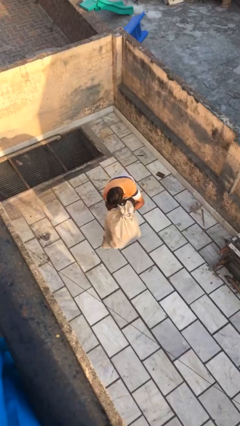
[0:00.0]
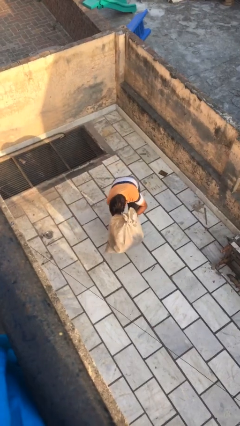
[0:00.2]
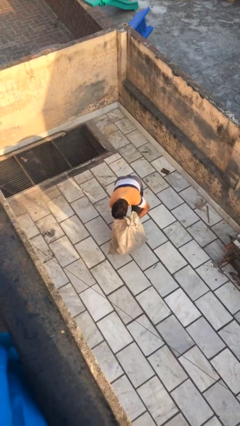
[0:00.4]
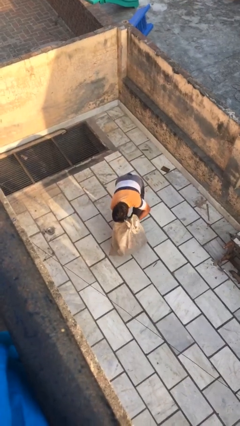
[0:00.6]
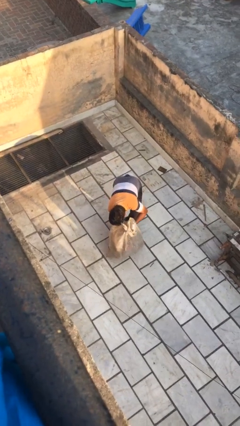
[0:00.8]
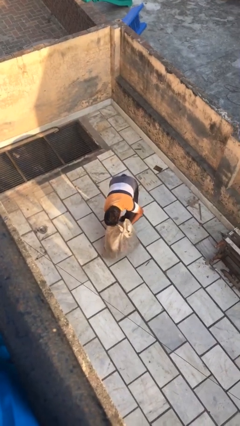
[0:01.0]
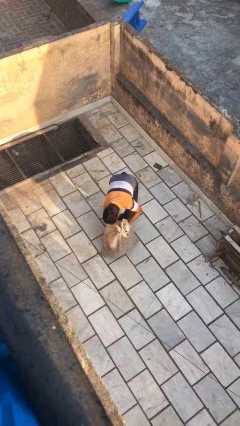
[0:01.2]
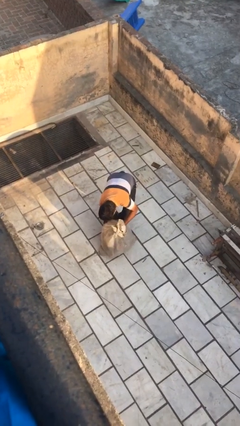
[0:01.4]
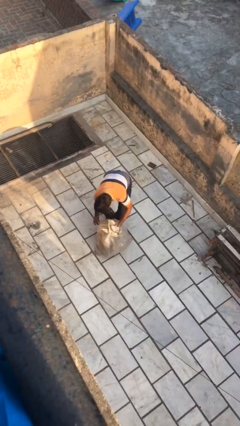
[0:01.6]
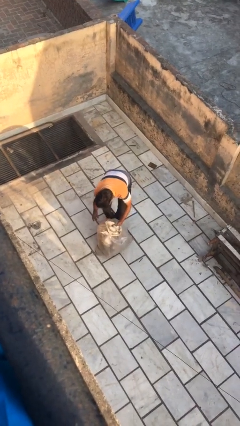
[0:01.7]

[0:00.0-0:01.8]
person puts down object on floor

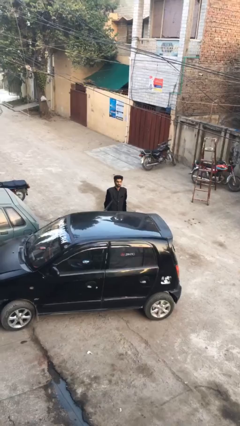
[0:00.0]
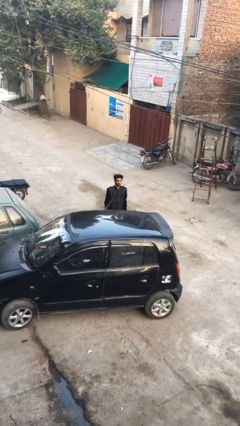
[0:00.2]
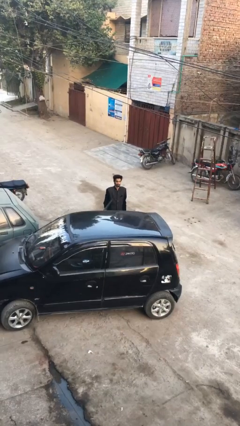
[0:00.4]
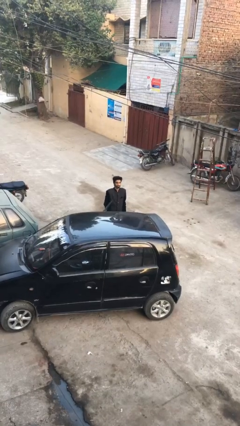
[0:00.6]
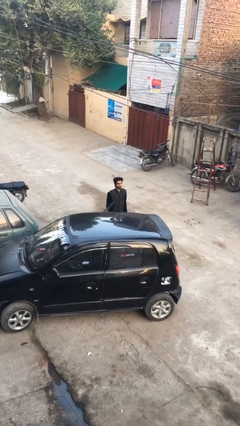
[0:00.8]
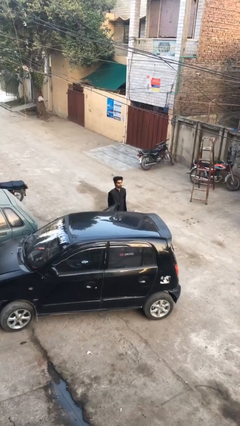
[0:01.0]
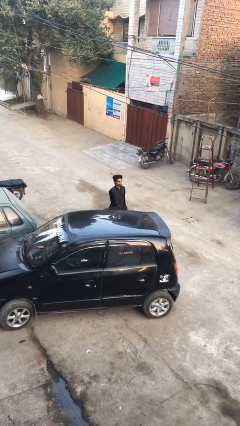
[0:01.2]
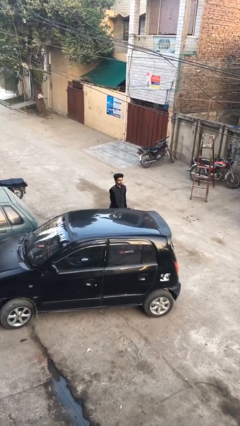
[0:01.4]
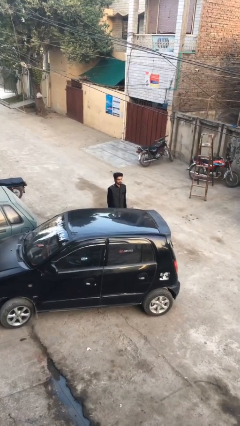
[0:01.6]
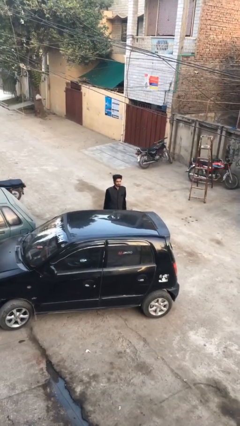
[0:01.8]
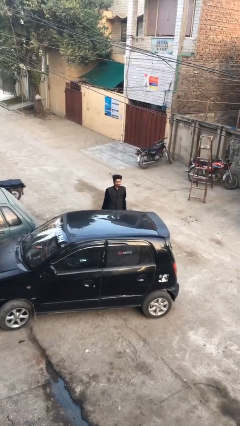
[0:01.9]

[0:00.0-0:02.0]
person closes car door

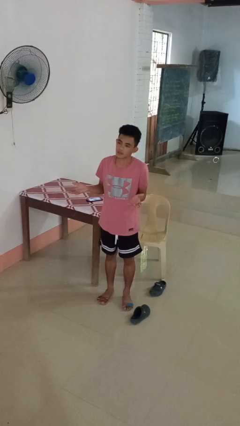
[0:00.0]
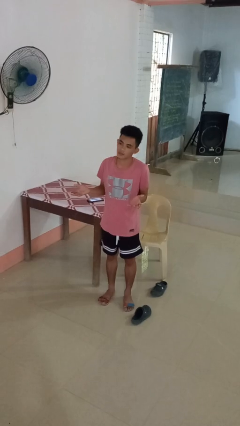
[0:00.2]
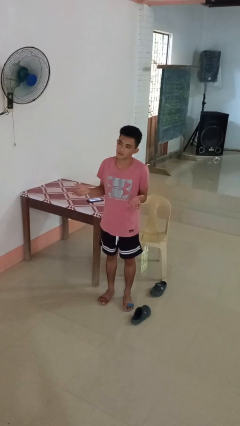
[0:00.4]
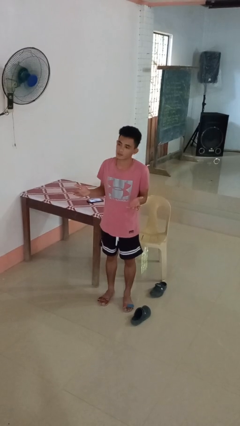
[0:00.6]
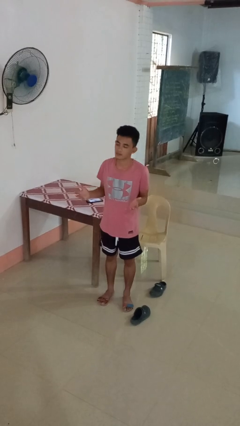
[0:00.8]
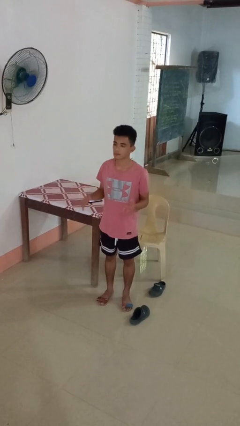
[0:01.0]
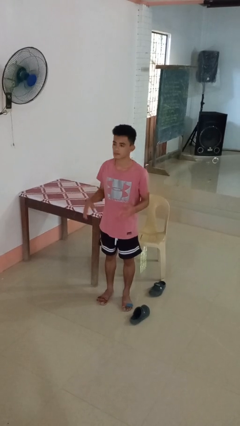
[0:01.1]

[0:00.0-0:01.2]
person shrugs

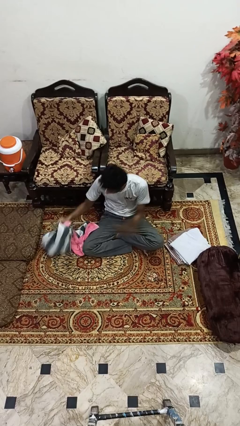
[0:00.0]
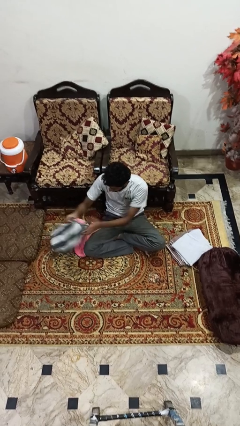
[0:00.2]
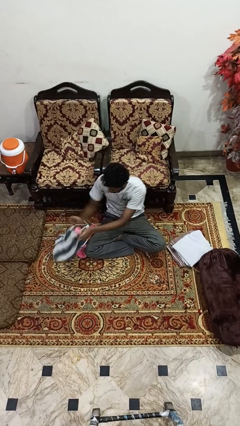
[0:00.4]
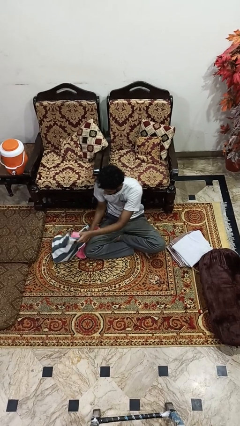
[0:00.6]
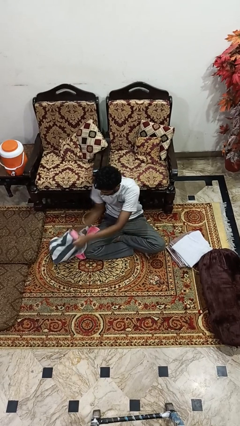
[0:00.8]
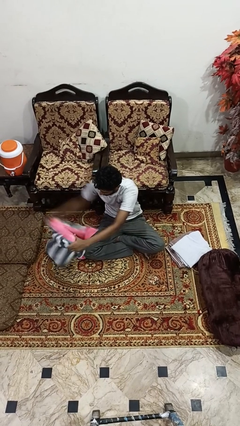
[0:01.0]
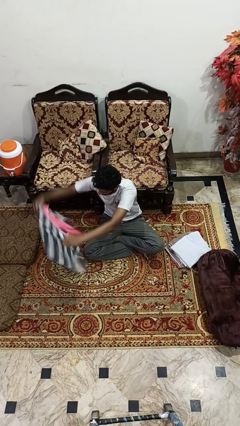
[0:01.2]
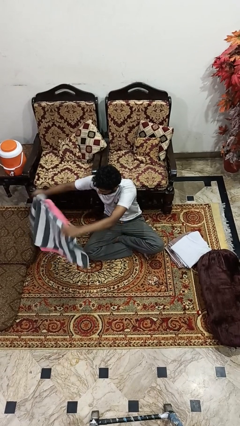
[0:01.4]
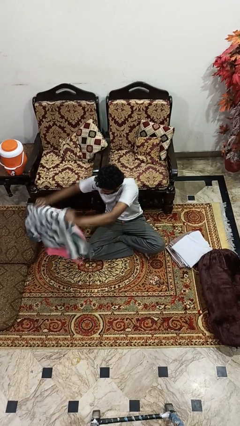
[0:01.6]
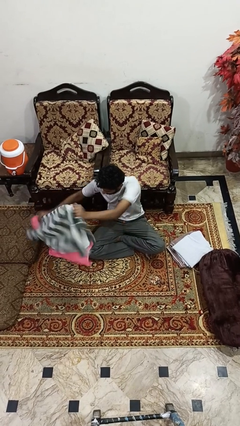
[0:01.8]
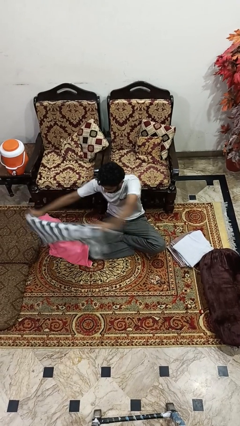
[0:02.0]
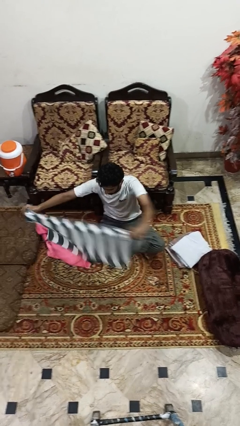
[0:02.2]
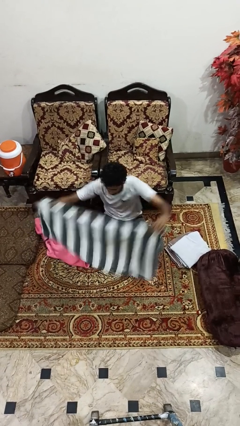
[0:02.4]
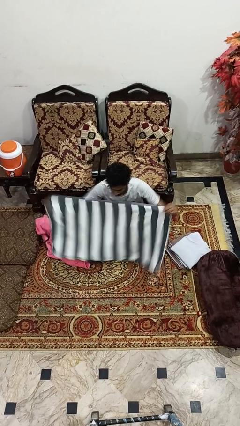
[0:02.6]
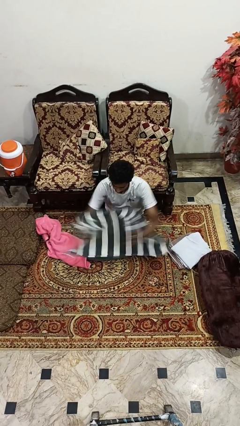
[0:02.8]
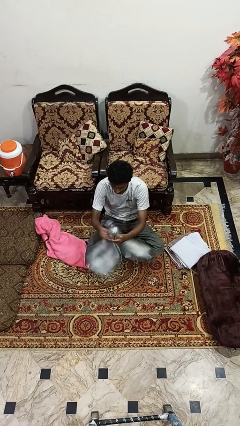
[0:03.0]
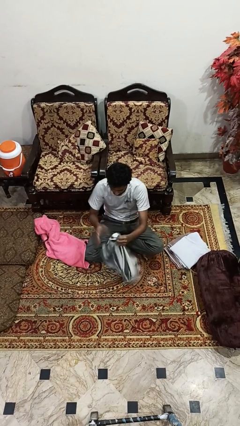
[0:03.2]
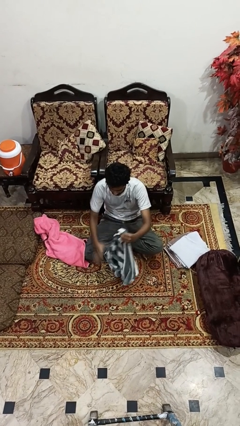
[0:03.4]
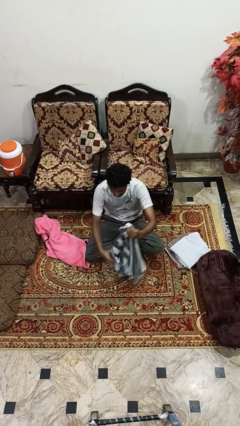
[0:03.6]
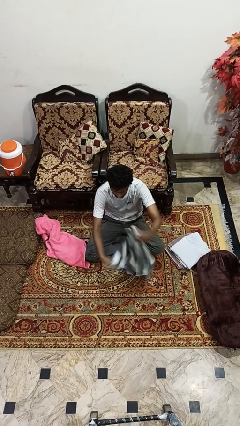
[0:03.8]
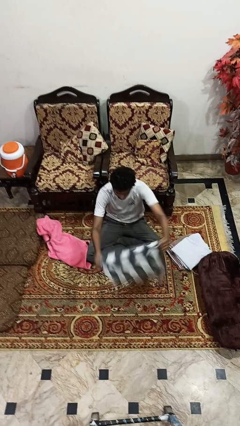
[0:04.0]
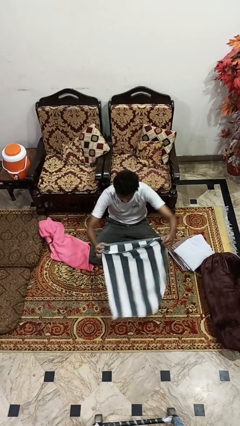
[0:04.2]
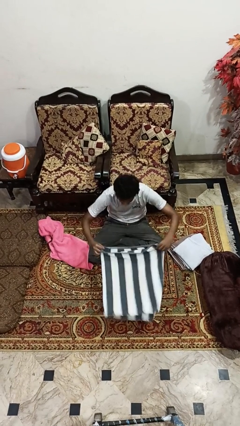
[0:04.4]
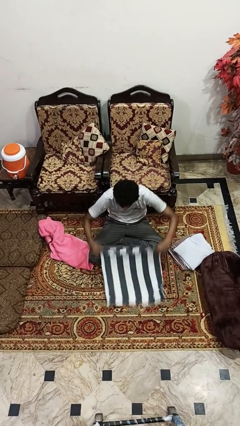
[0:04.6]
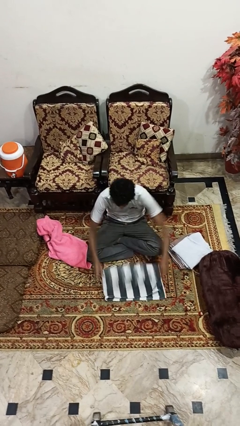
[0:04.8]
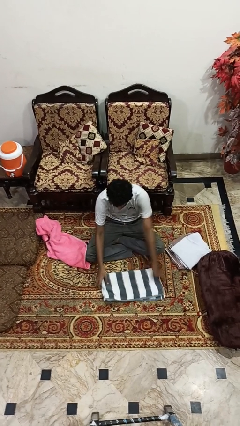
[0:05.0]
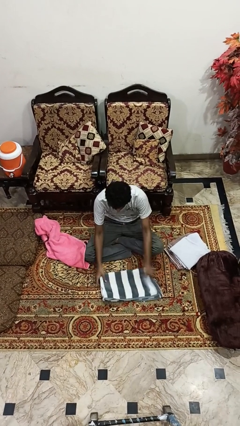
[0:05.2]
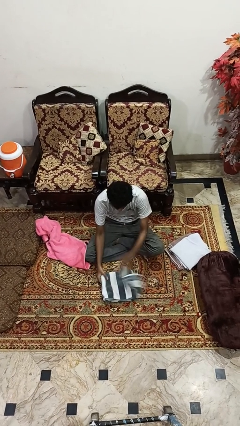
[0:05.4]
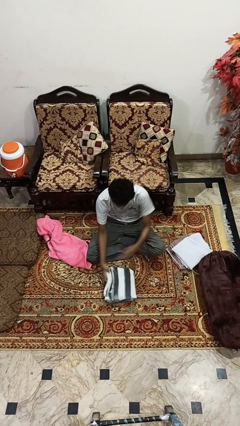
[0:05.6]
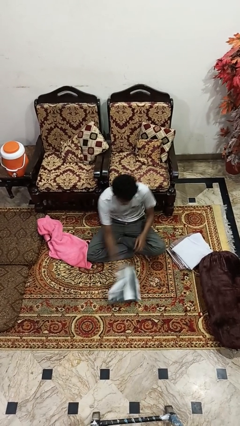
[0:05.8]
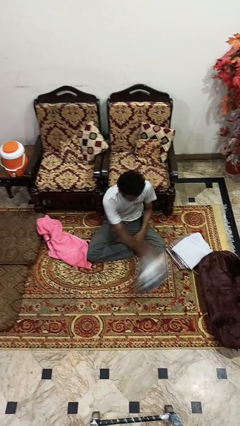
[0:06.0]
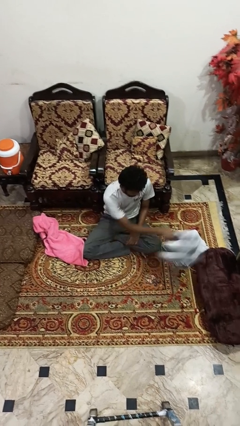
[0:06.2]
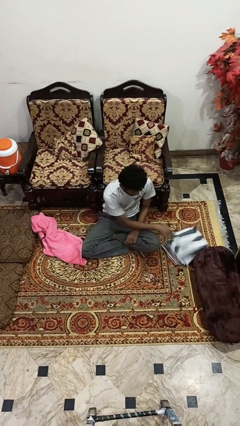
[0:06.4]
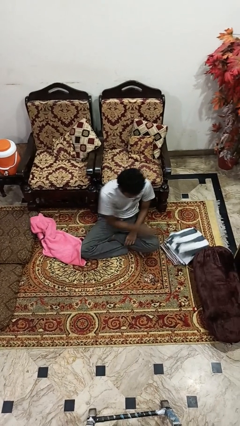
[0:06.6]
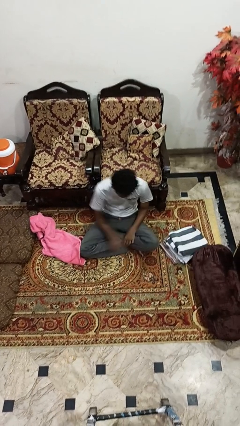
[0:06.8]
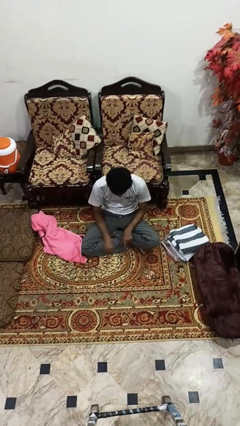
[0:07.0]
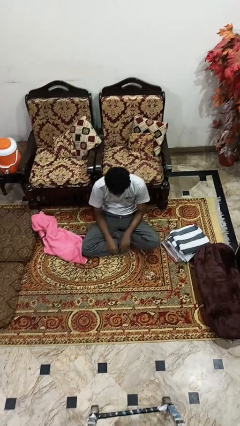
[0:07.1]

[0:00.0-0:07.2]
person folds towel

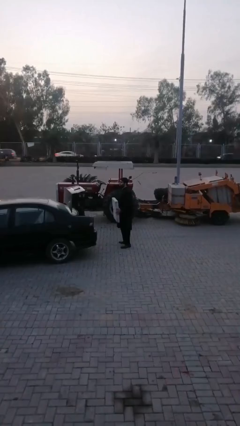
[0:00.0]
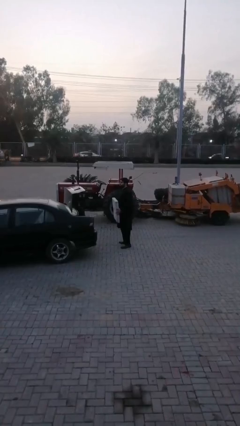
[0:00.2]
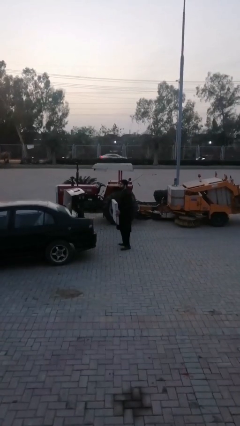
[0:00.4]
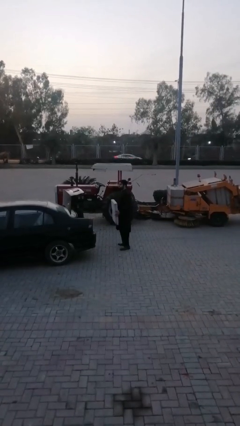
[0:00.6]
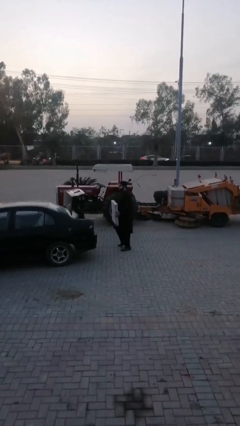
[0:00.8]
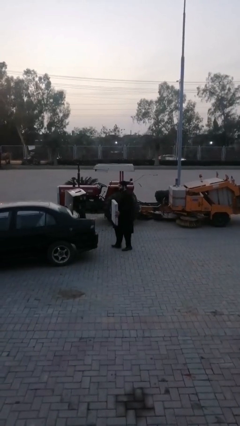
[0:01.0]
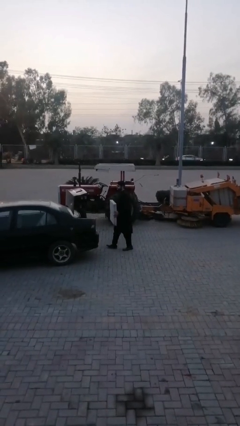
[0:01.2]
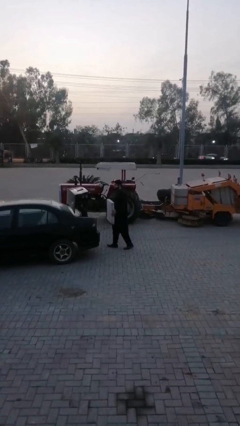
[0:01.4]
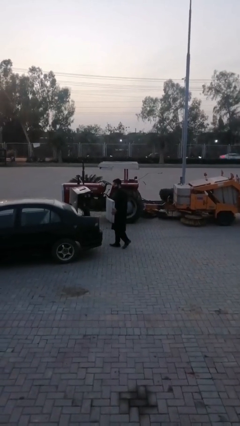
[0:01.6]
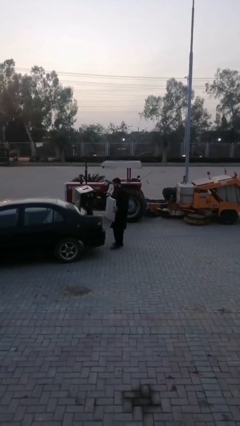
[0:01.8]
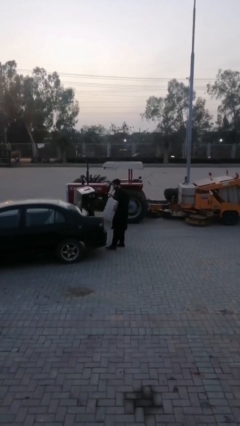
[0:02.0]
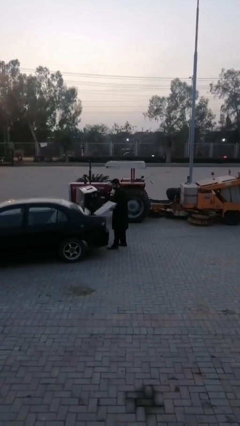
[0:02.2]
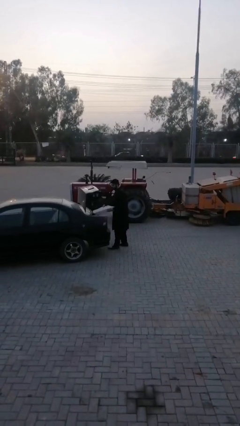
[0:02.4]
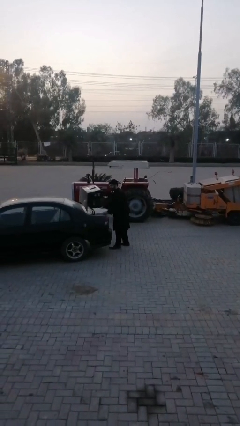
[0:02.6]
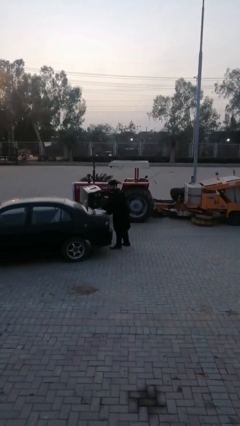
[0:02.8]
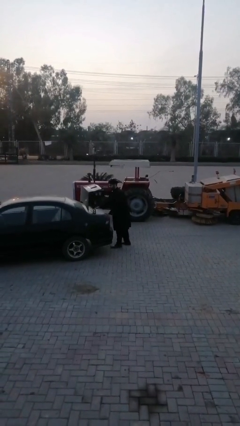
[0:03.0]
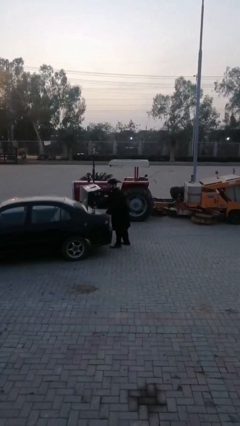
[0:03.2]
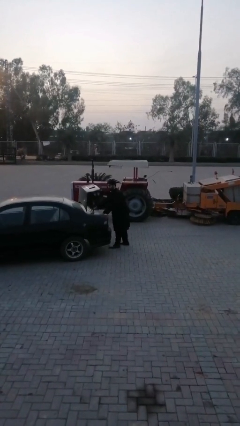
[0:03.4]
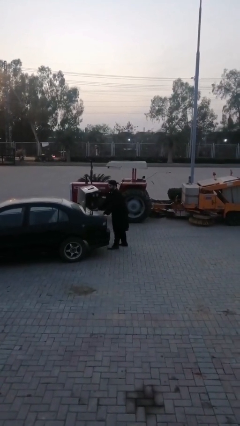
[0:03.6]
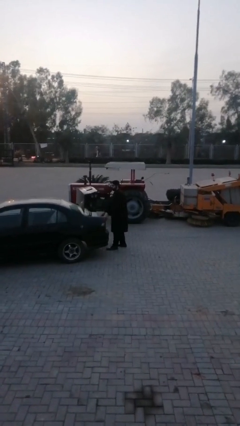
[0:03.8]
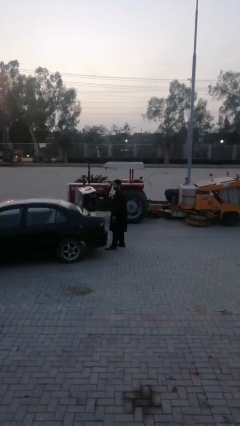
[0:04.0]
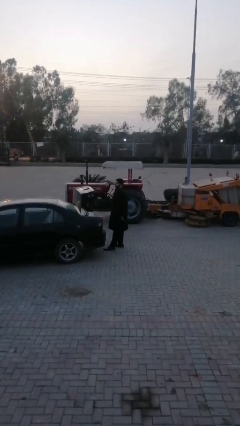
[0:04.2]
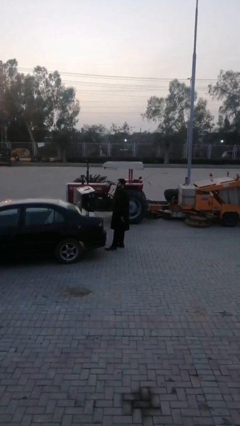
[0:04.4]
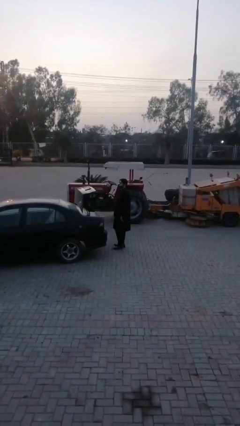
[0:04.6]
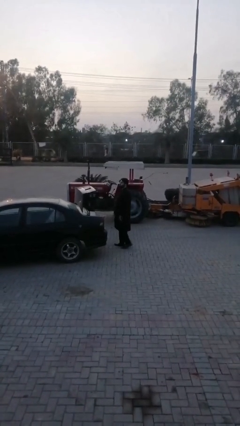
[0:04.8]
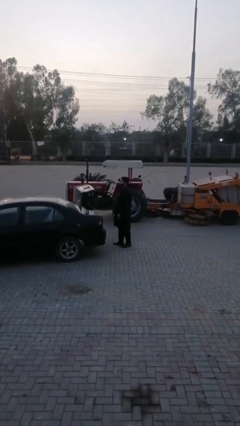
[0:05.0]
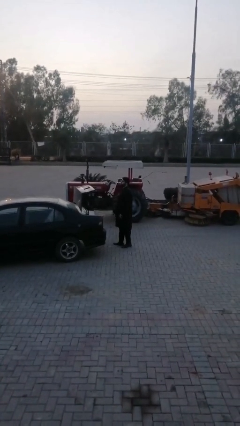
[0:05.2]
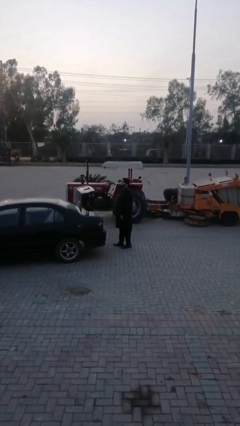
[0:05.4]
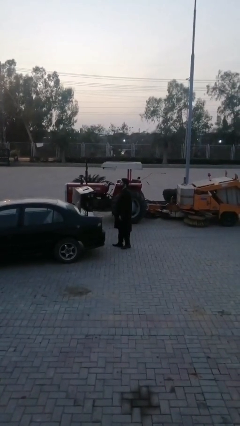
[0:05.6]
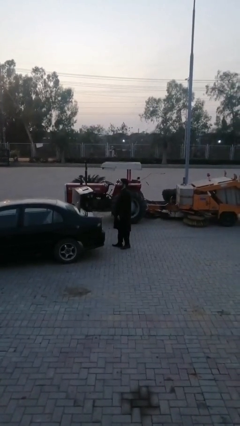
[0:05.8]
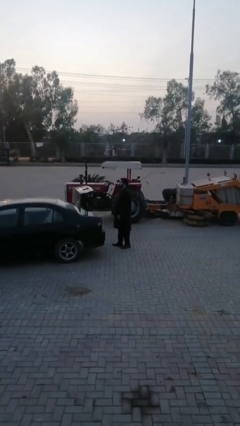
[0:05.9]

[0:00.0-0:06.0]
person loads car
